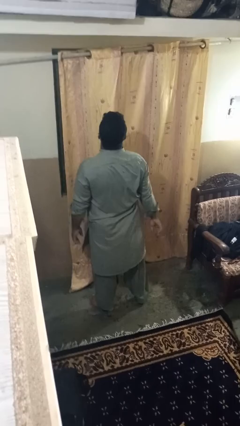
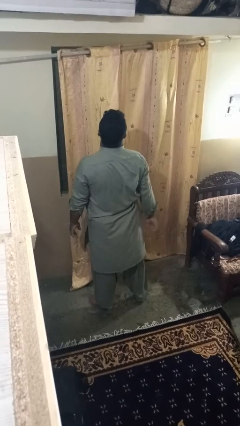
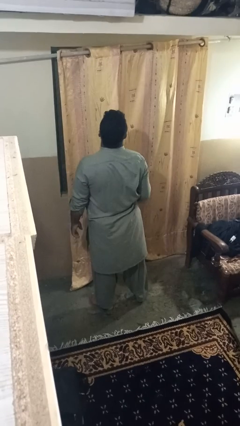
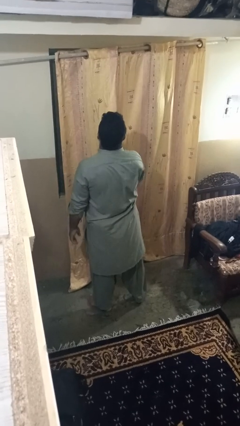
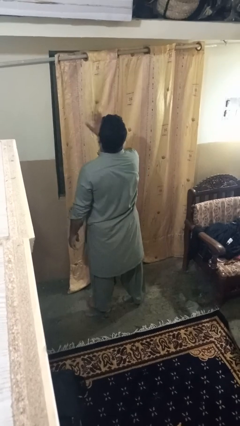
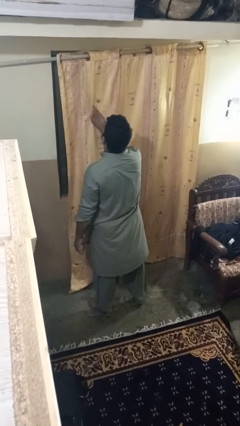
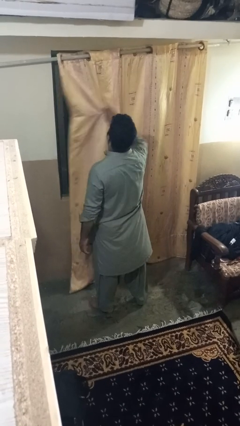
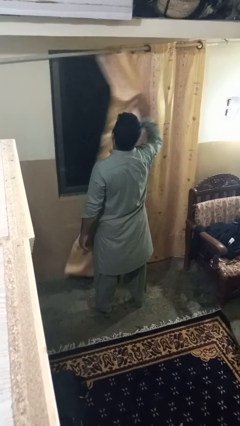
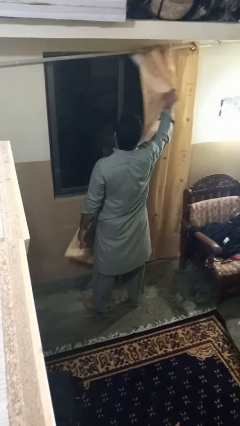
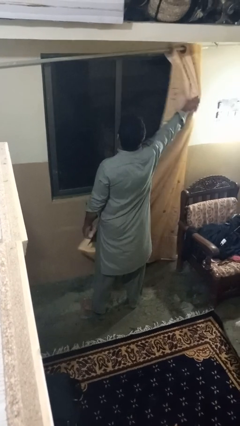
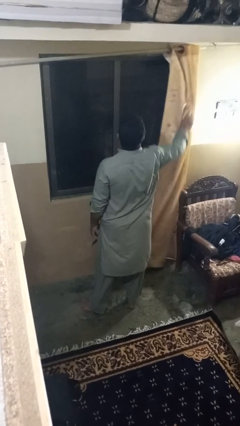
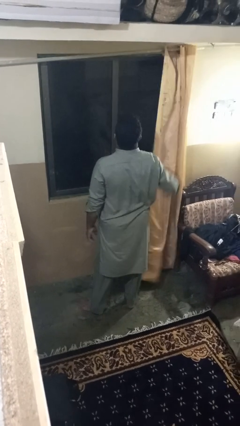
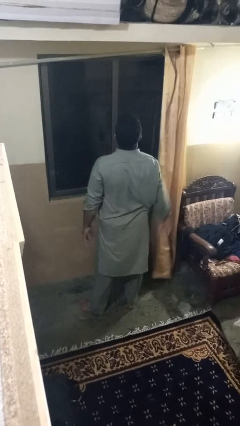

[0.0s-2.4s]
person opens curtains

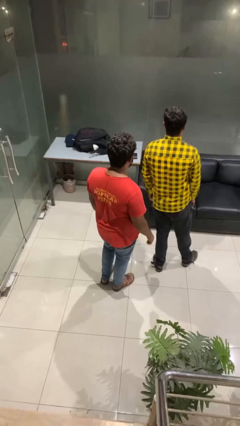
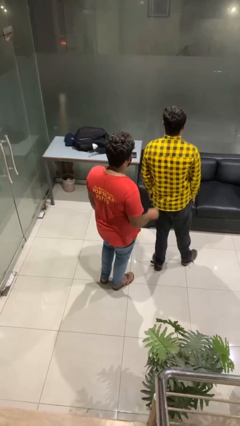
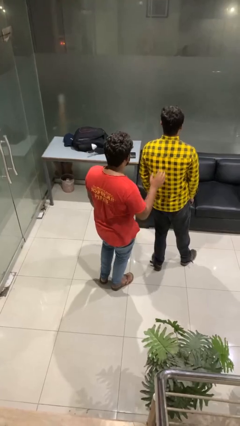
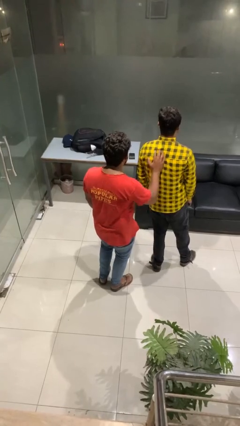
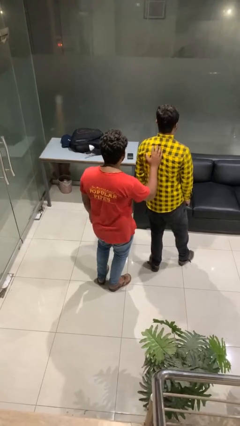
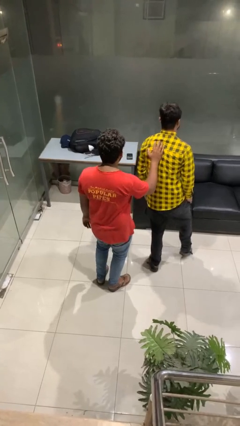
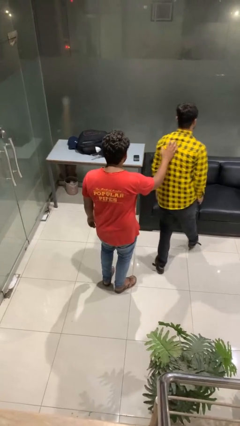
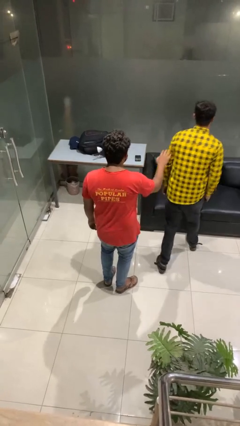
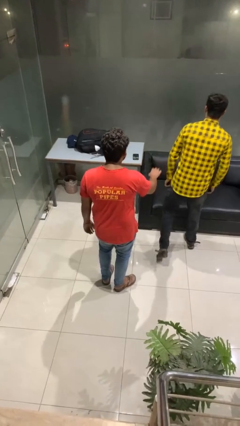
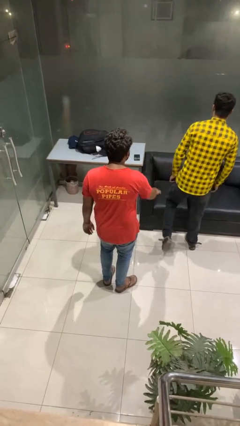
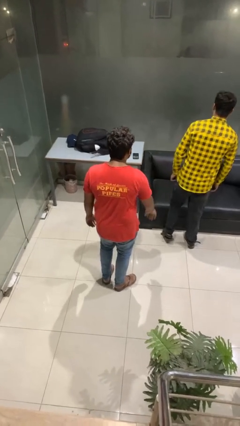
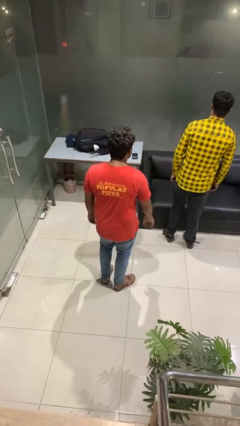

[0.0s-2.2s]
person shoves person

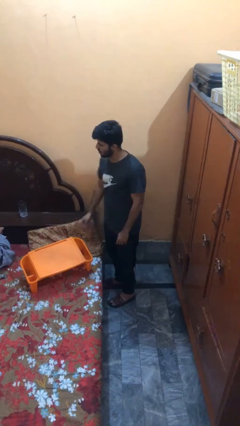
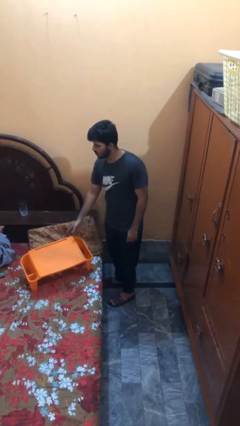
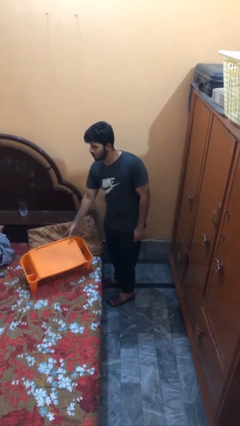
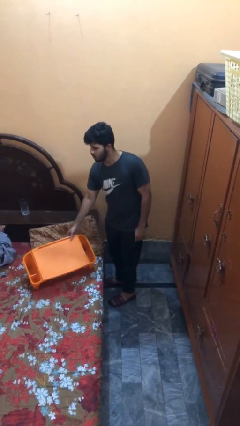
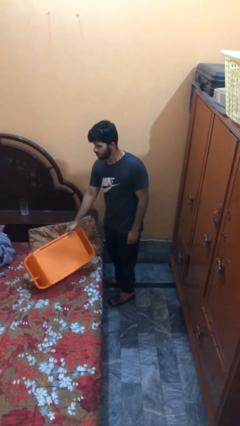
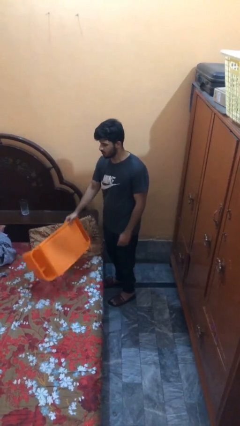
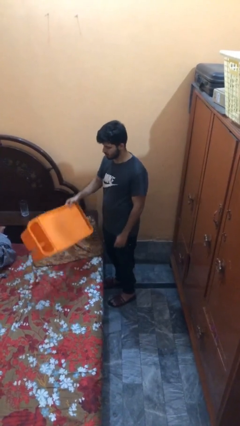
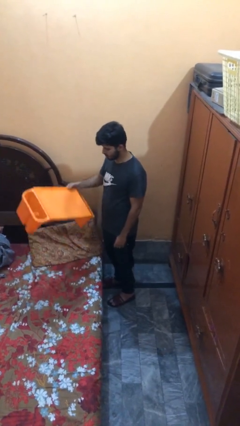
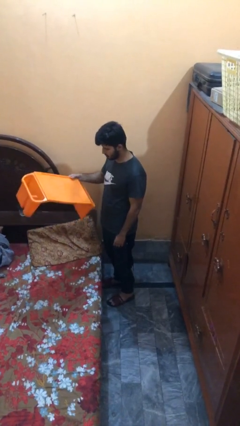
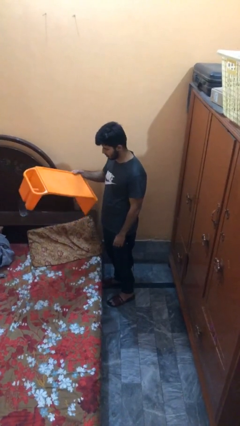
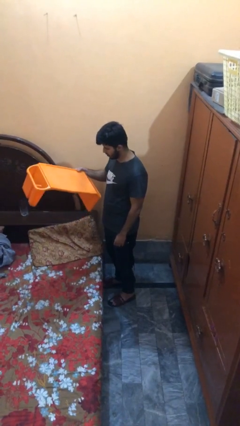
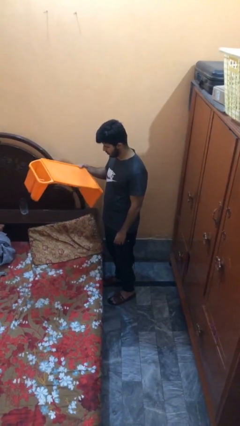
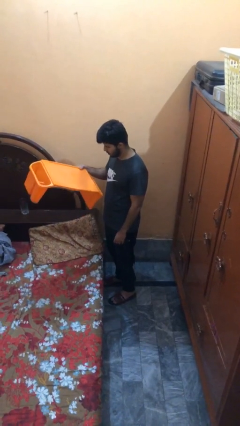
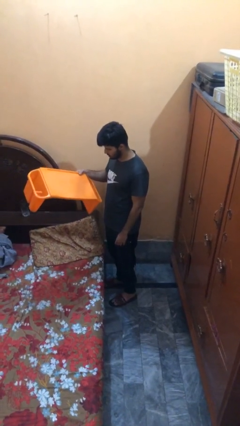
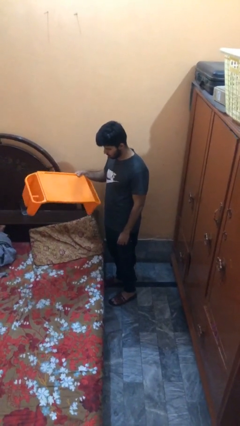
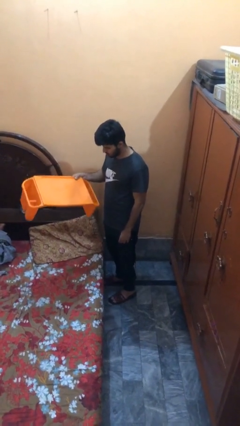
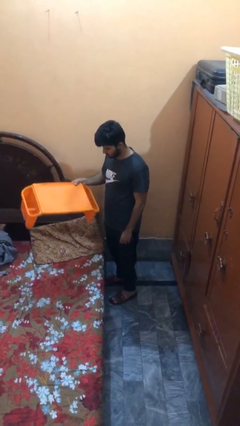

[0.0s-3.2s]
person picks up object from bed

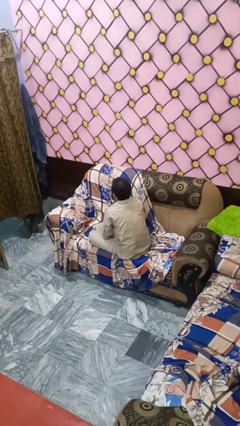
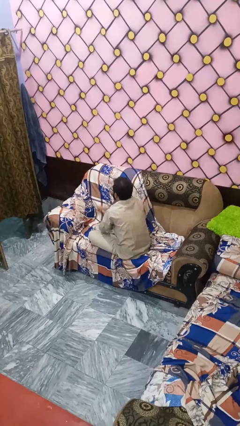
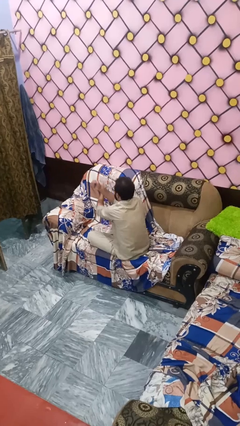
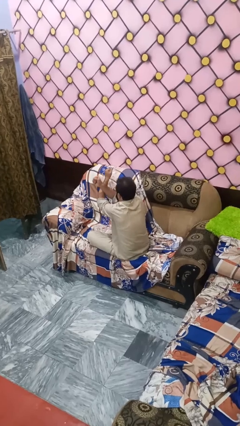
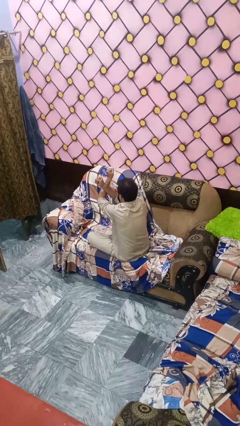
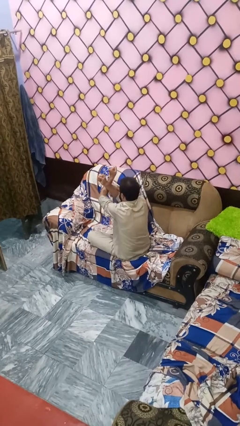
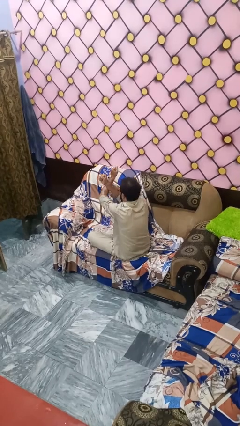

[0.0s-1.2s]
person gestures arms x

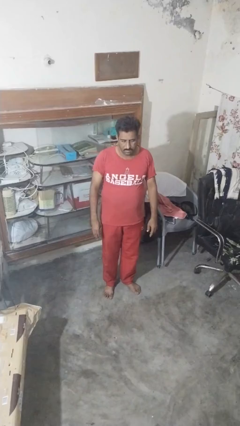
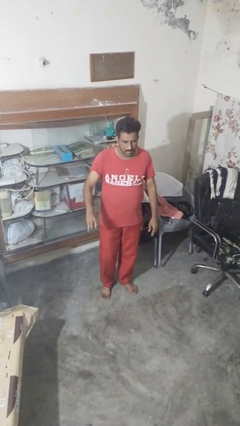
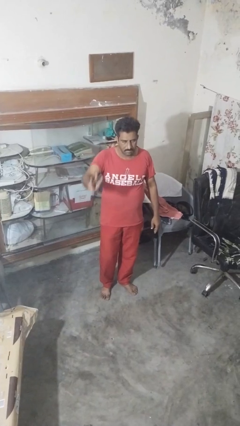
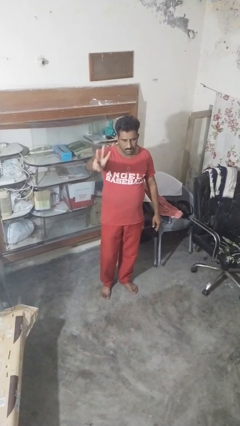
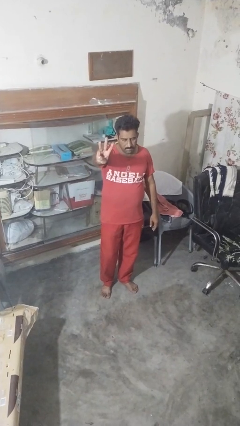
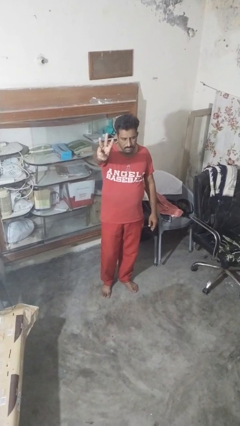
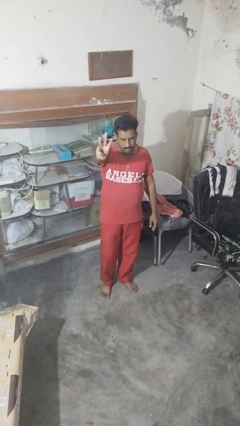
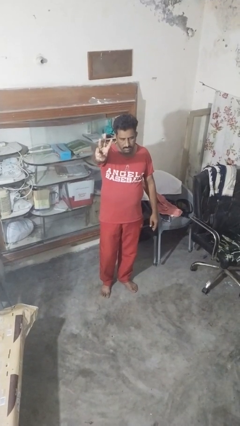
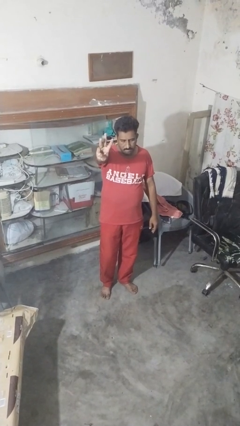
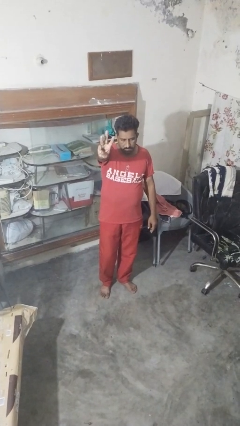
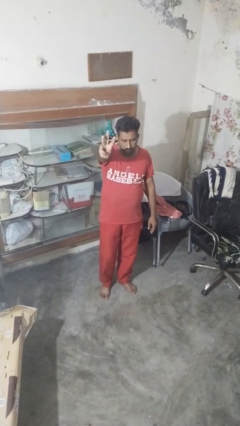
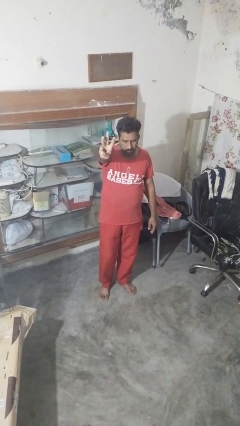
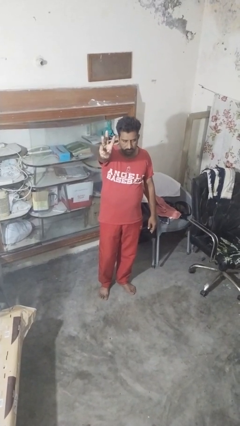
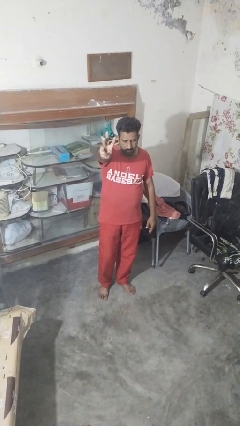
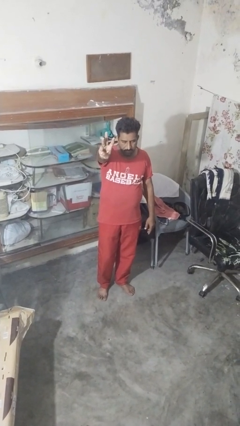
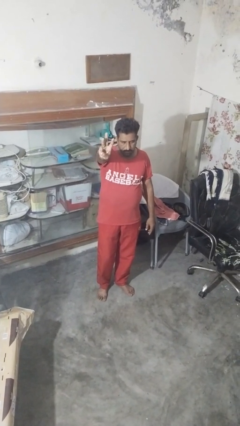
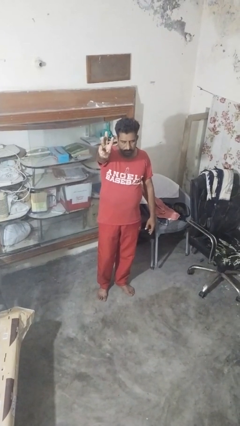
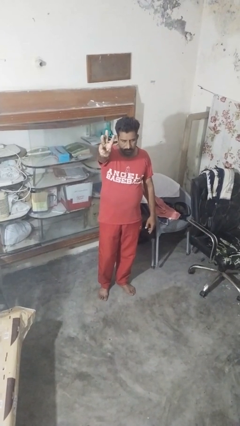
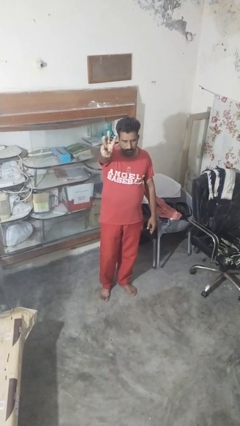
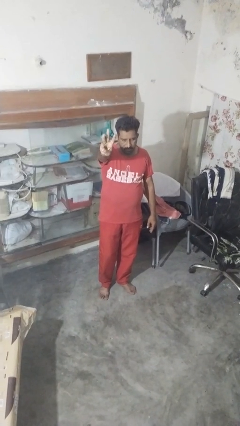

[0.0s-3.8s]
person gestures number three

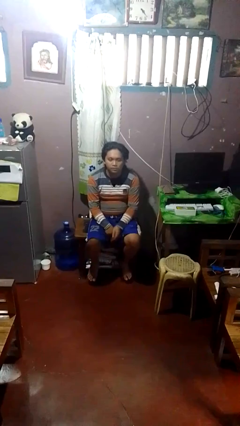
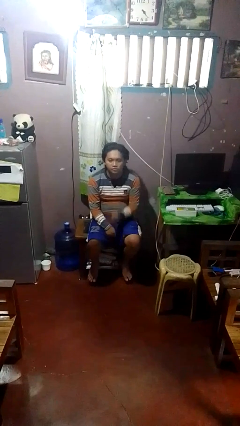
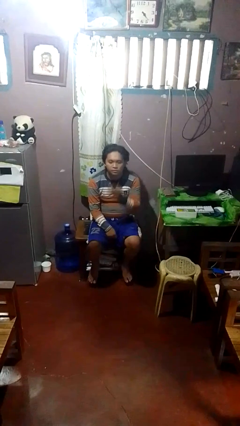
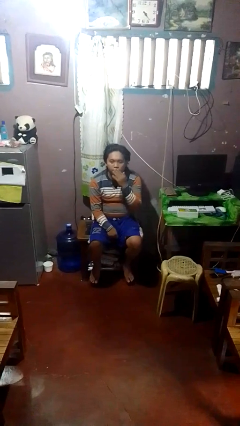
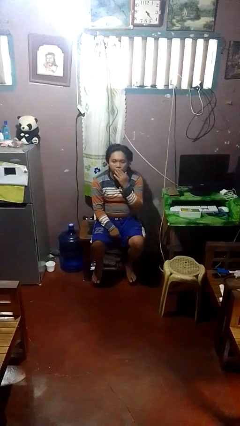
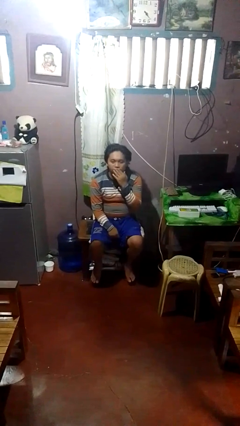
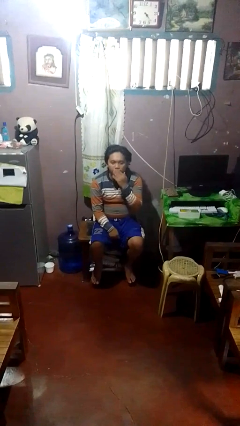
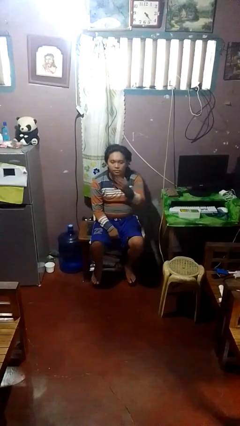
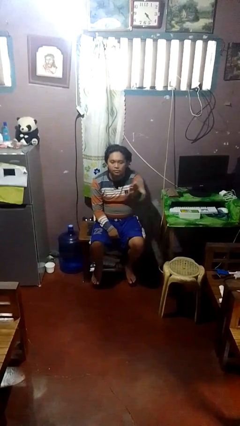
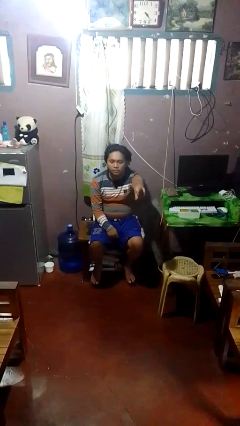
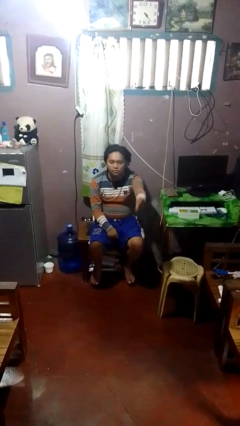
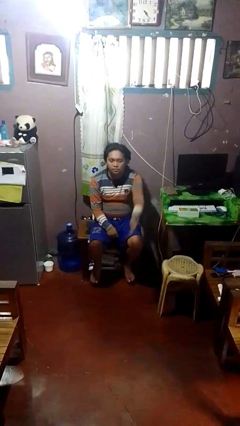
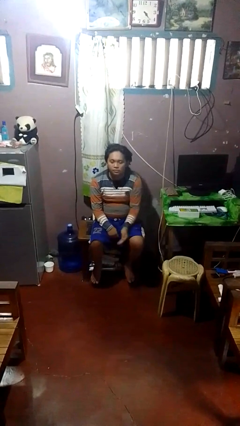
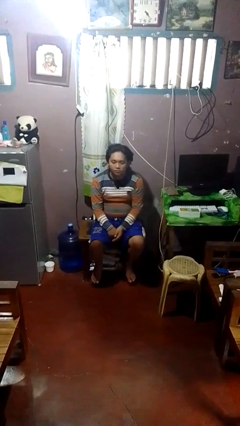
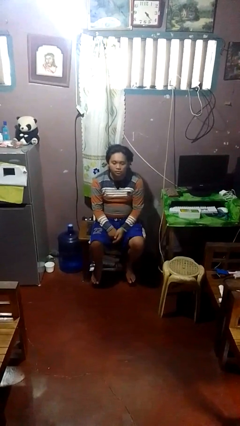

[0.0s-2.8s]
person gestures blow kiss

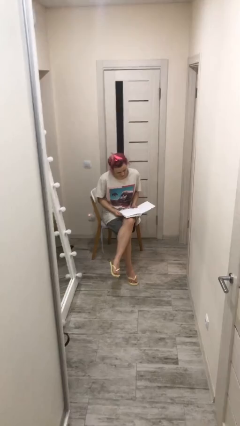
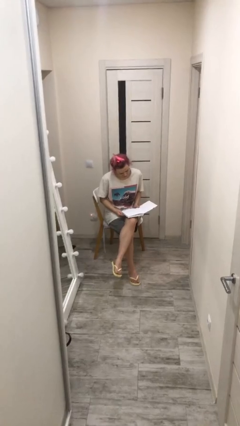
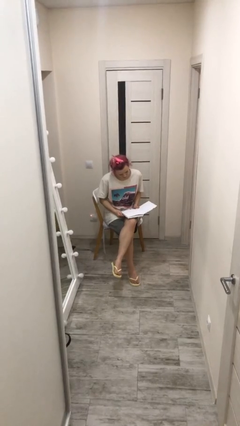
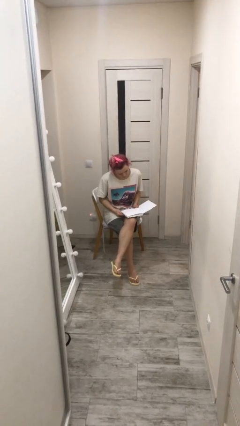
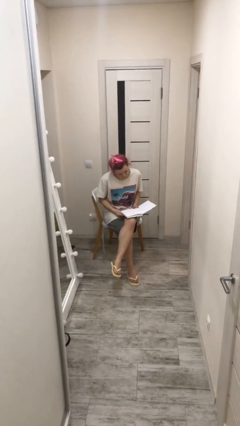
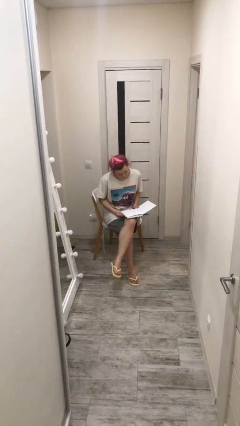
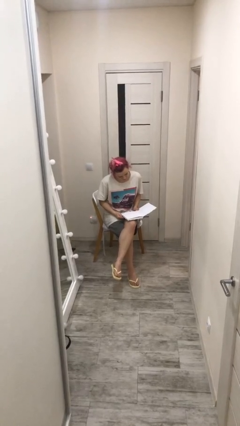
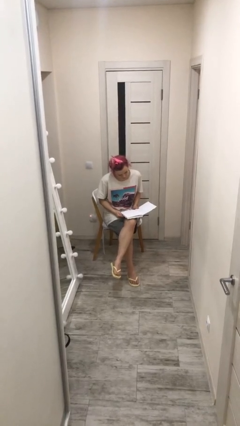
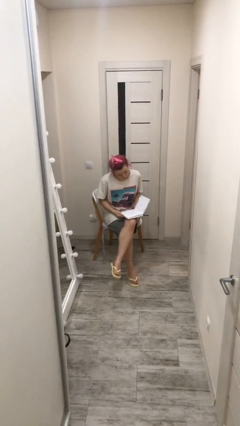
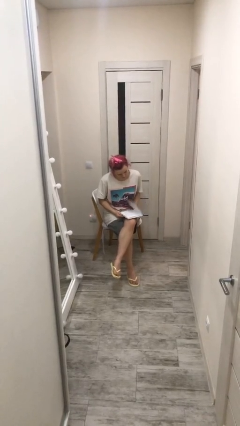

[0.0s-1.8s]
person reads document
